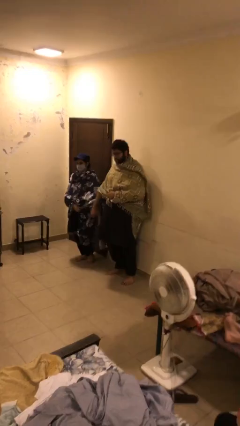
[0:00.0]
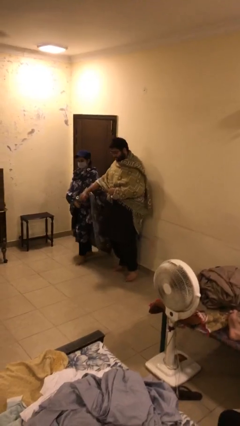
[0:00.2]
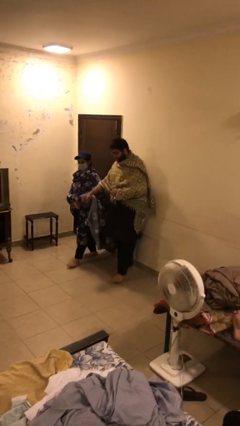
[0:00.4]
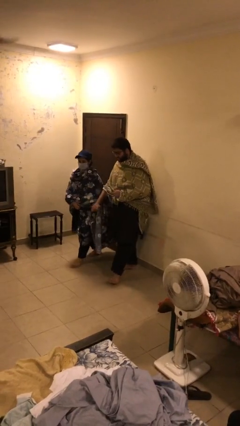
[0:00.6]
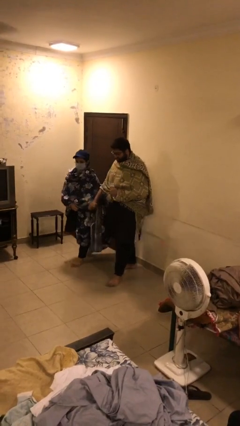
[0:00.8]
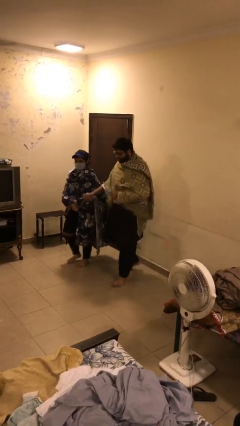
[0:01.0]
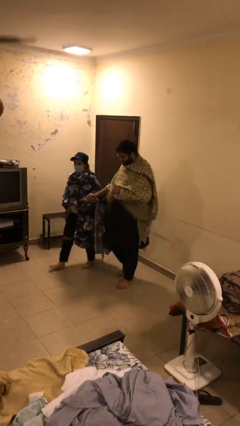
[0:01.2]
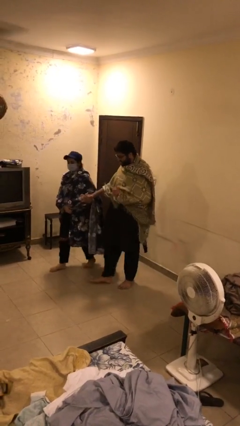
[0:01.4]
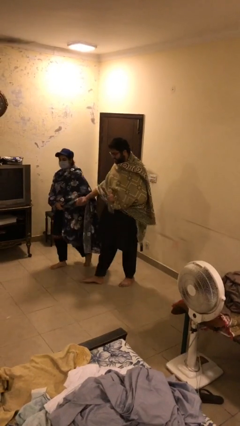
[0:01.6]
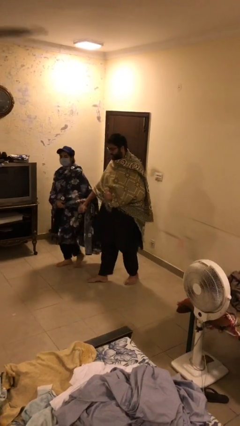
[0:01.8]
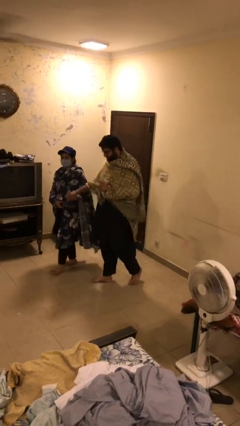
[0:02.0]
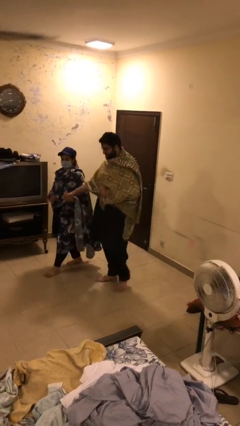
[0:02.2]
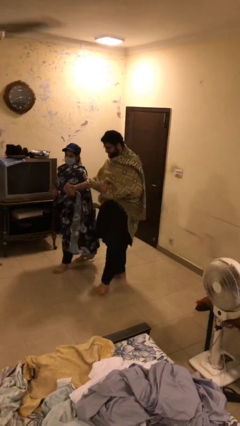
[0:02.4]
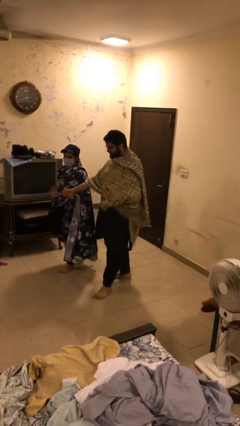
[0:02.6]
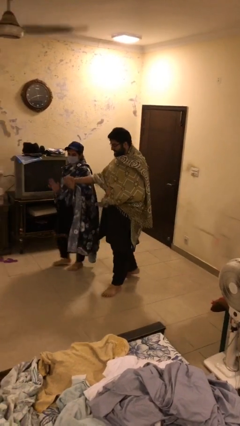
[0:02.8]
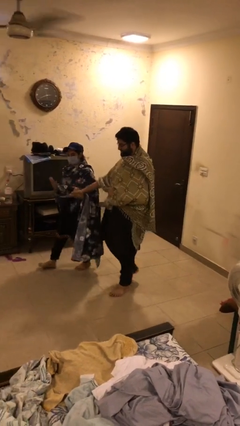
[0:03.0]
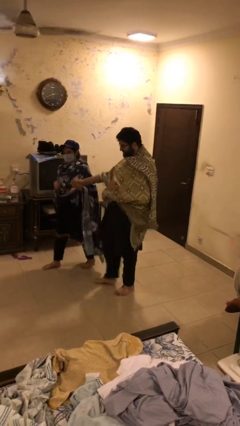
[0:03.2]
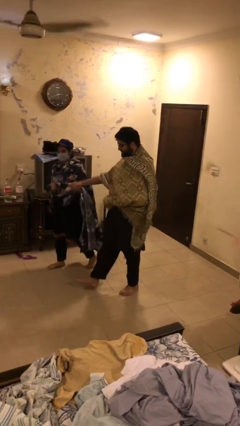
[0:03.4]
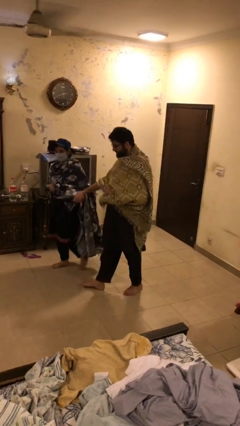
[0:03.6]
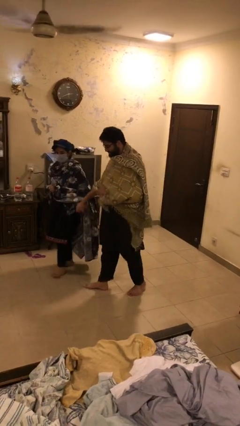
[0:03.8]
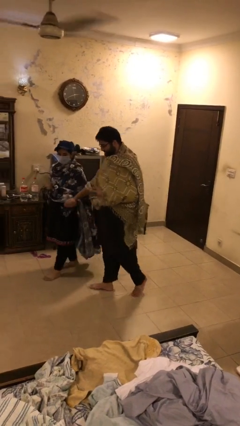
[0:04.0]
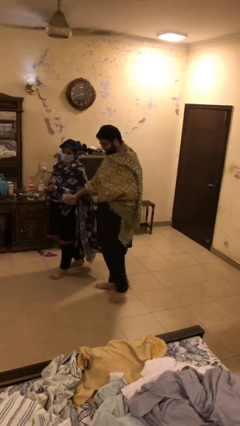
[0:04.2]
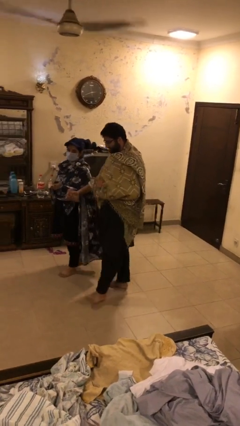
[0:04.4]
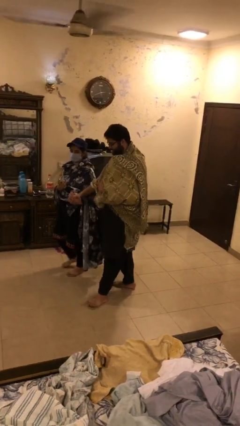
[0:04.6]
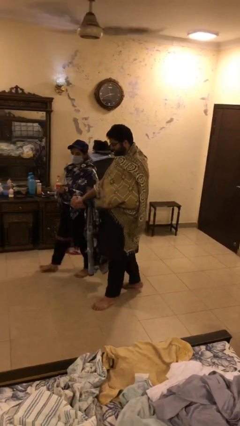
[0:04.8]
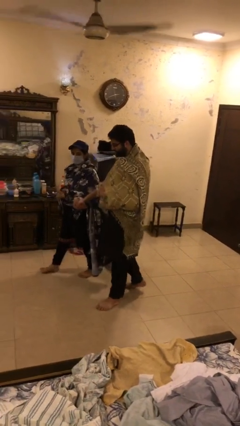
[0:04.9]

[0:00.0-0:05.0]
person holds hand

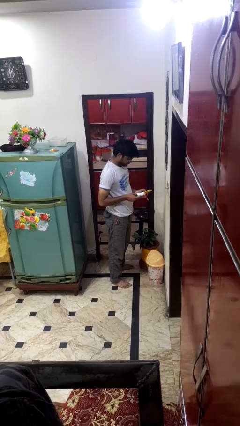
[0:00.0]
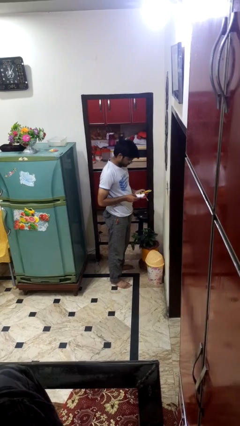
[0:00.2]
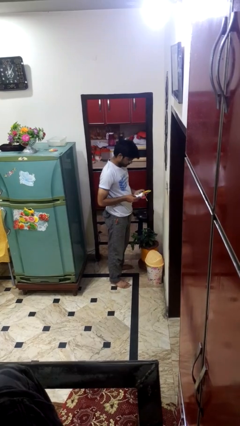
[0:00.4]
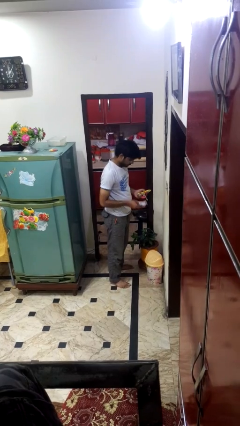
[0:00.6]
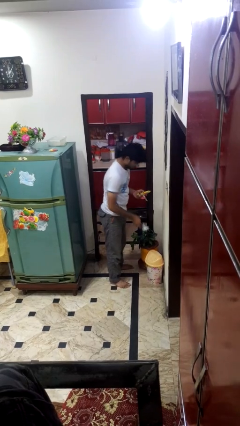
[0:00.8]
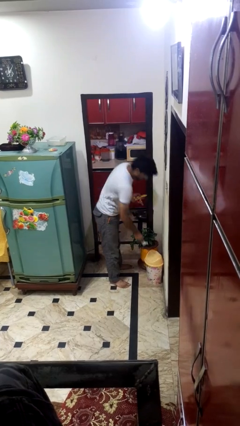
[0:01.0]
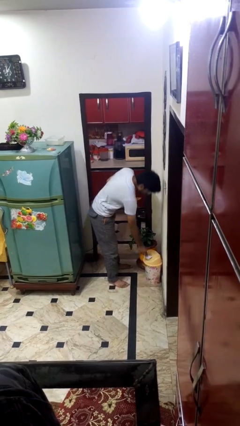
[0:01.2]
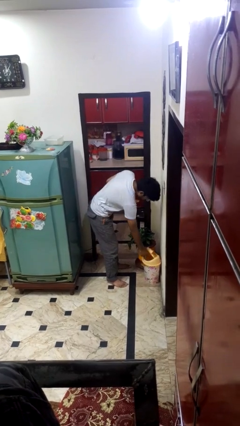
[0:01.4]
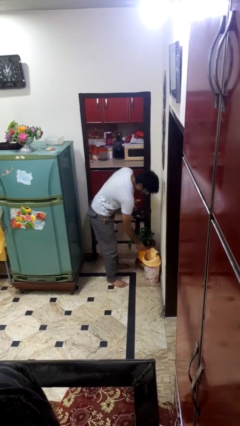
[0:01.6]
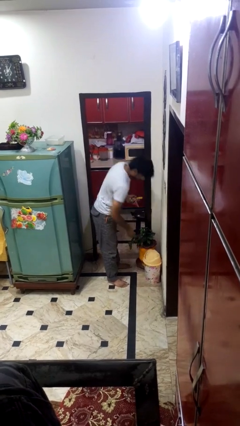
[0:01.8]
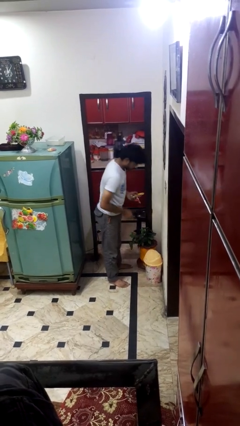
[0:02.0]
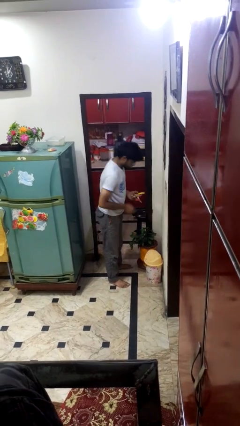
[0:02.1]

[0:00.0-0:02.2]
person discards trash

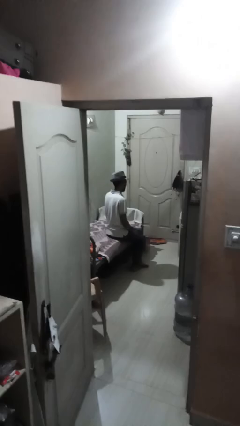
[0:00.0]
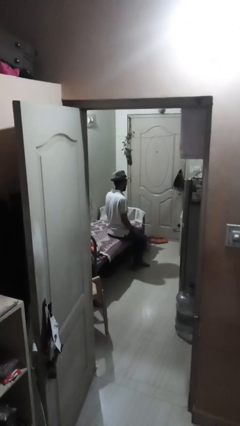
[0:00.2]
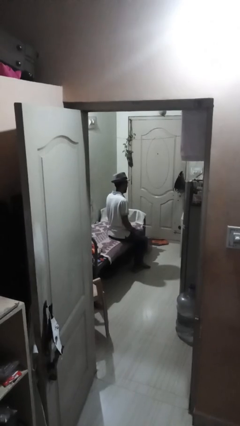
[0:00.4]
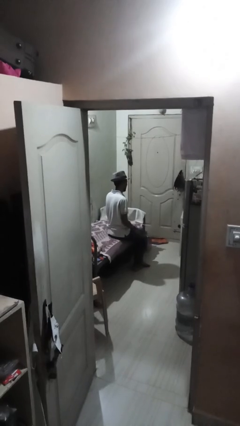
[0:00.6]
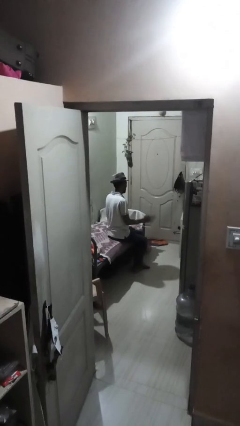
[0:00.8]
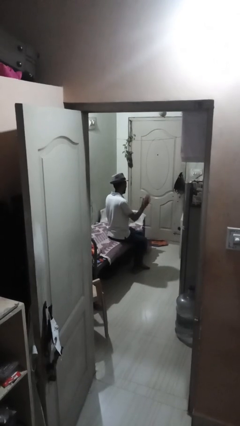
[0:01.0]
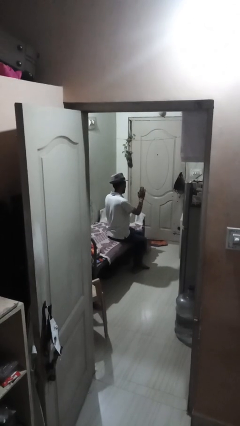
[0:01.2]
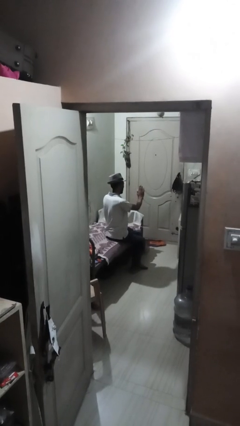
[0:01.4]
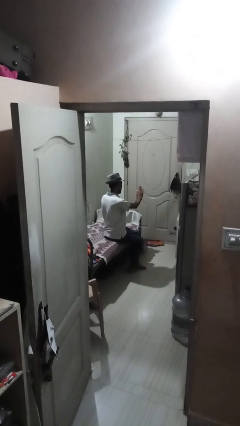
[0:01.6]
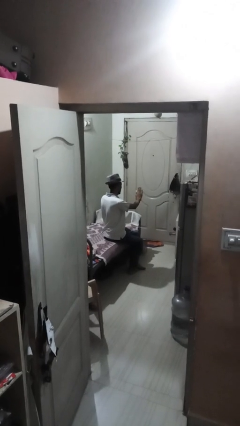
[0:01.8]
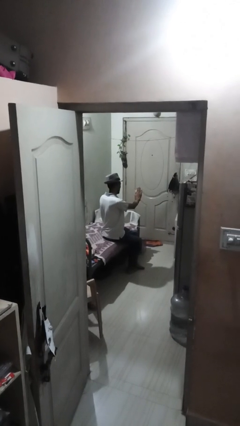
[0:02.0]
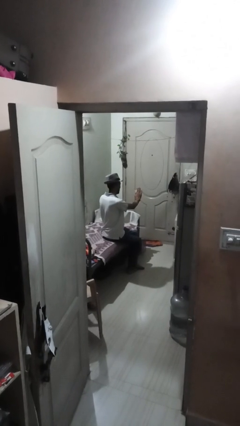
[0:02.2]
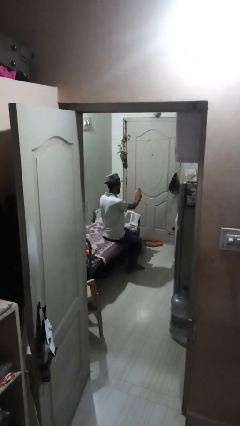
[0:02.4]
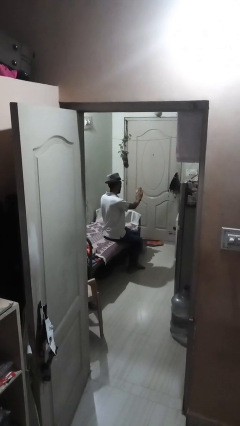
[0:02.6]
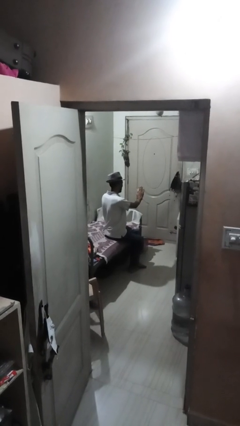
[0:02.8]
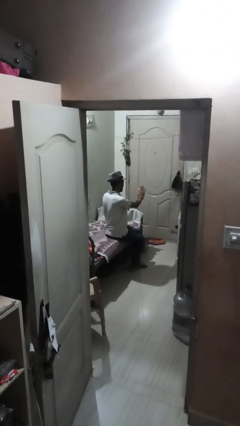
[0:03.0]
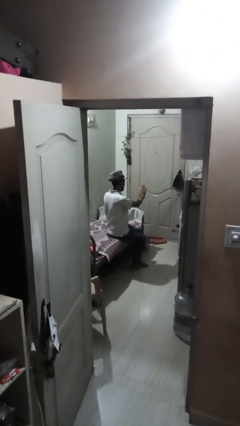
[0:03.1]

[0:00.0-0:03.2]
person gestures stop

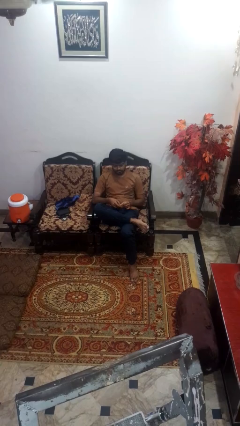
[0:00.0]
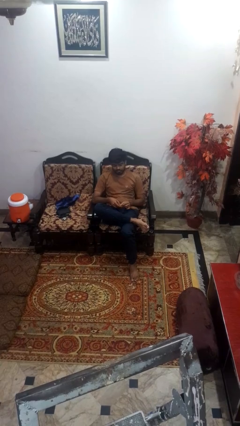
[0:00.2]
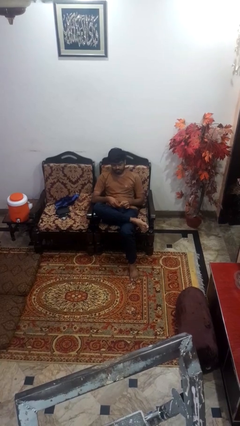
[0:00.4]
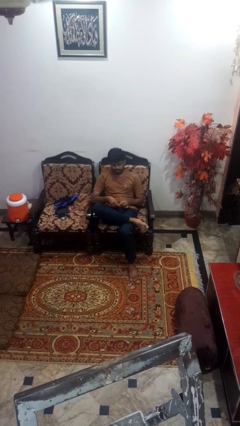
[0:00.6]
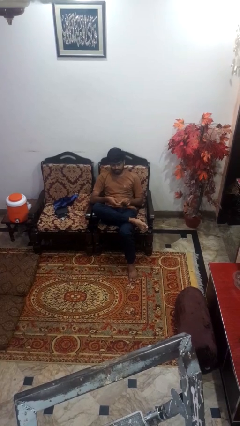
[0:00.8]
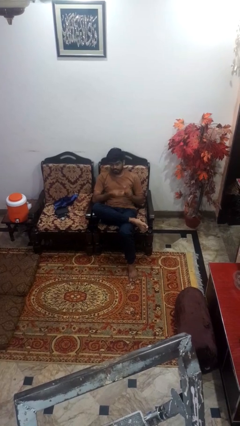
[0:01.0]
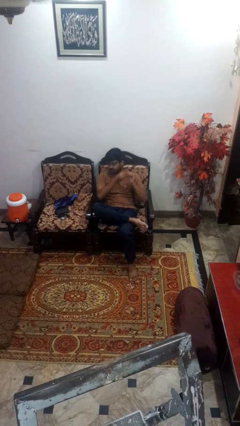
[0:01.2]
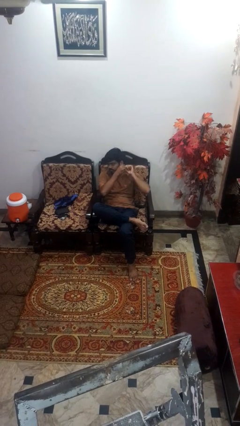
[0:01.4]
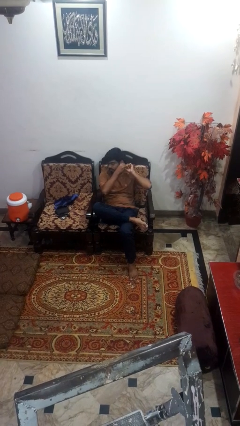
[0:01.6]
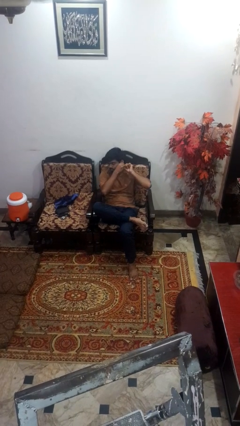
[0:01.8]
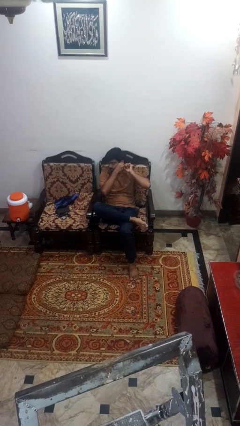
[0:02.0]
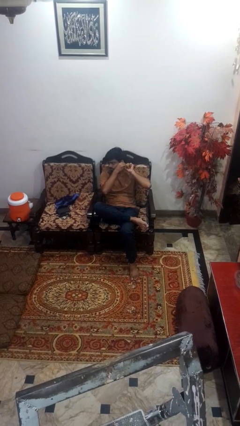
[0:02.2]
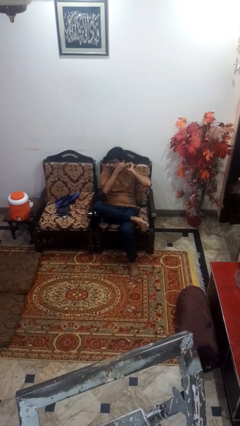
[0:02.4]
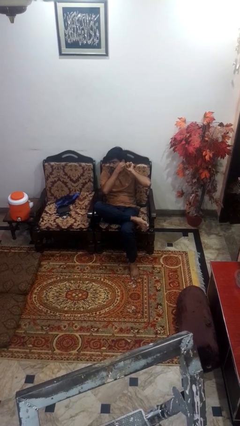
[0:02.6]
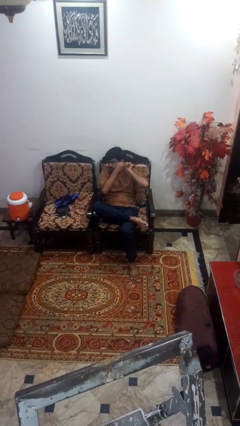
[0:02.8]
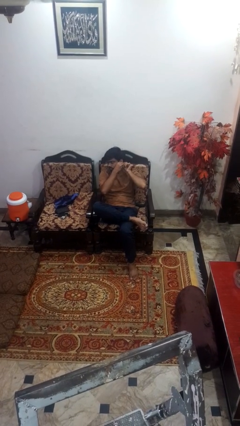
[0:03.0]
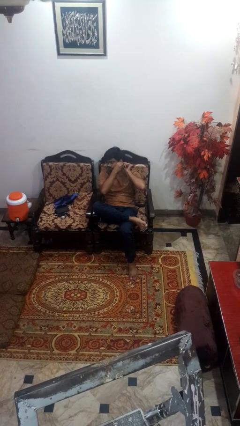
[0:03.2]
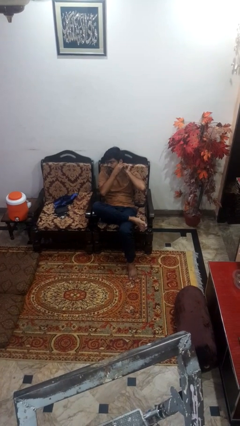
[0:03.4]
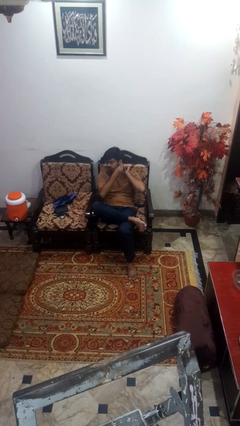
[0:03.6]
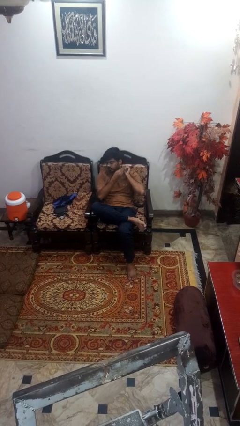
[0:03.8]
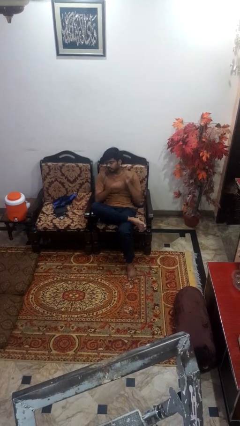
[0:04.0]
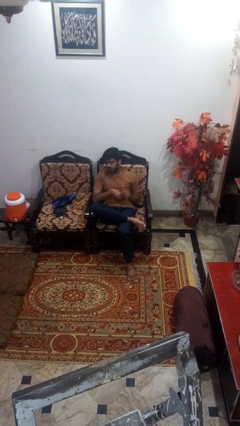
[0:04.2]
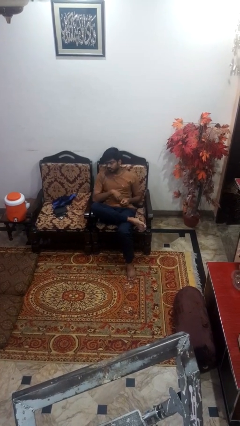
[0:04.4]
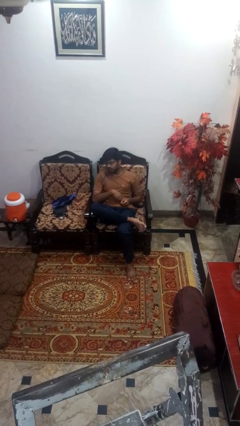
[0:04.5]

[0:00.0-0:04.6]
person puts on earrings

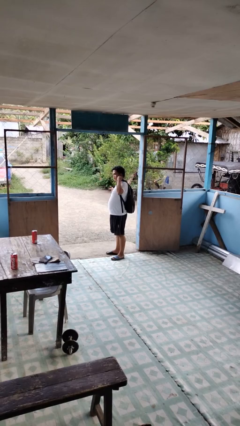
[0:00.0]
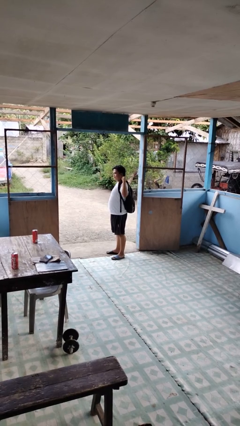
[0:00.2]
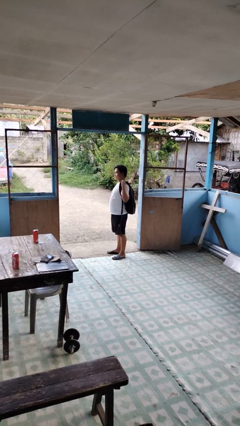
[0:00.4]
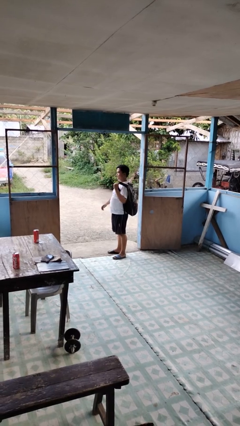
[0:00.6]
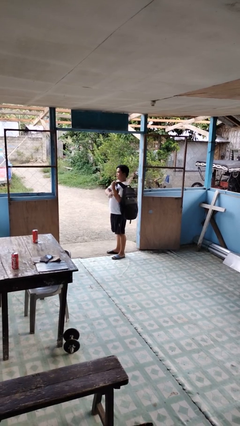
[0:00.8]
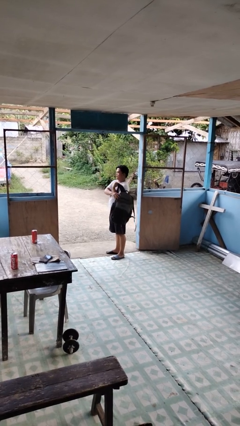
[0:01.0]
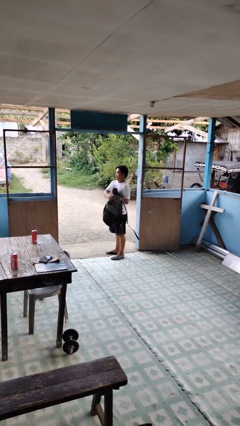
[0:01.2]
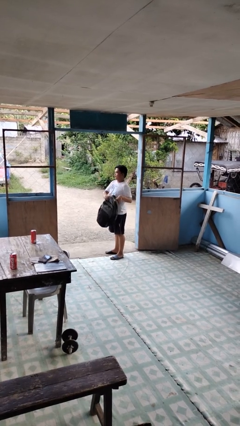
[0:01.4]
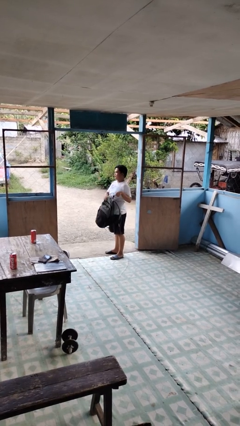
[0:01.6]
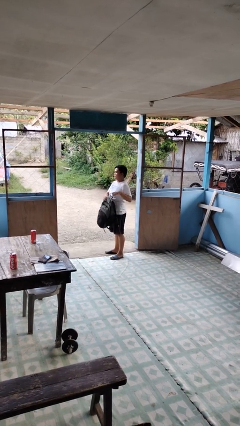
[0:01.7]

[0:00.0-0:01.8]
person takes off backpack

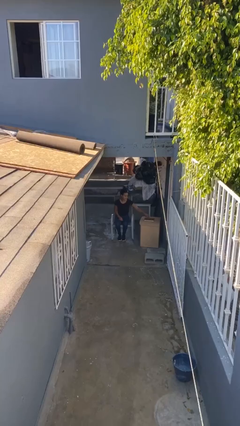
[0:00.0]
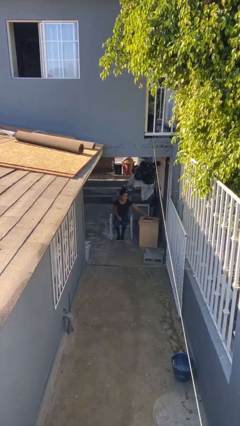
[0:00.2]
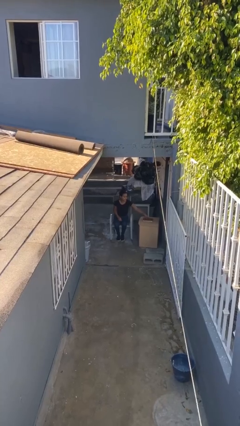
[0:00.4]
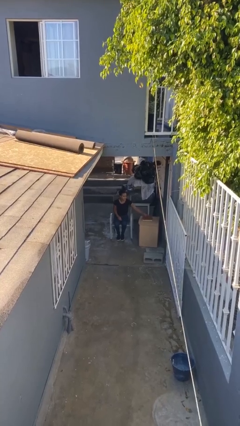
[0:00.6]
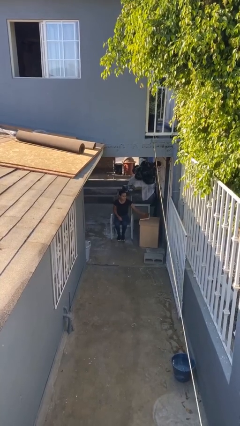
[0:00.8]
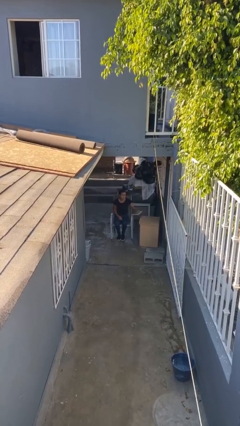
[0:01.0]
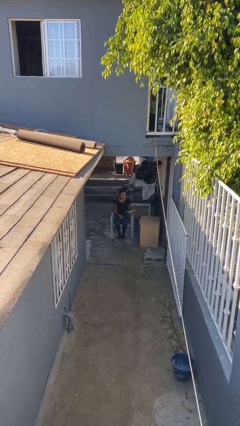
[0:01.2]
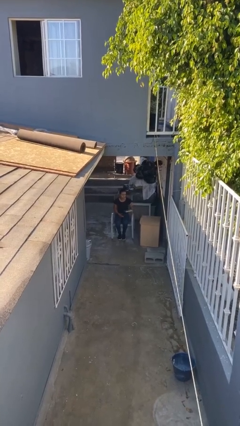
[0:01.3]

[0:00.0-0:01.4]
person picks up object from table
